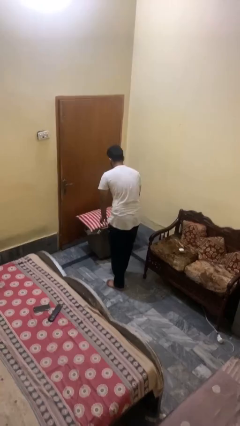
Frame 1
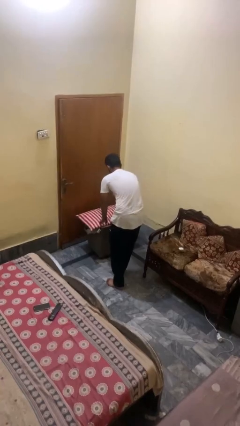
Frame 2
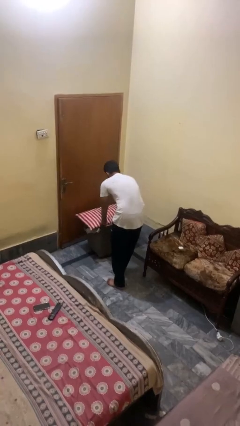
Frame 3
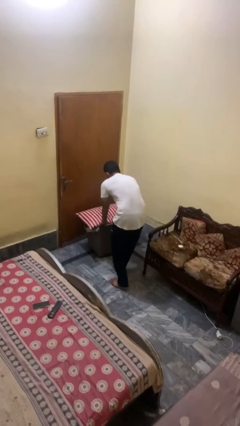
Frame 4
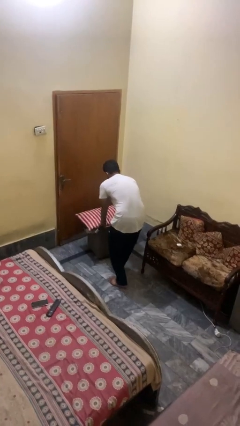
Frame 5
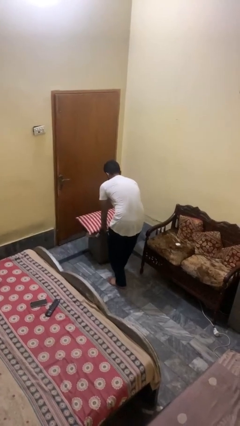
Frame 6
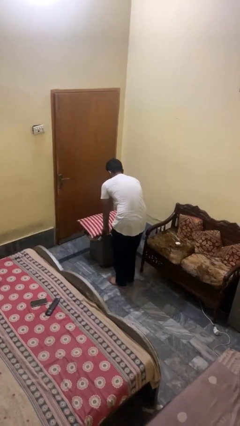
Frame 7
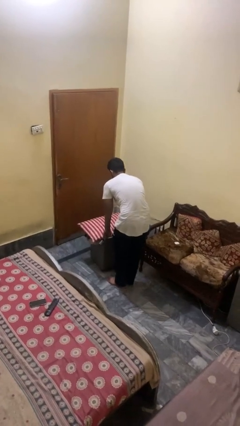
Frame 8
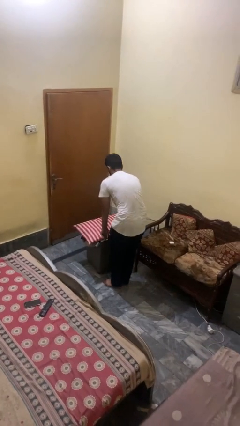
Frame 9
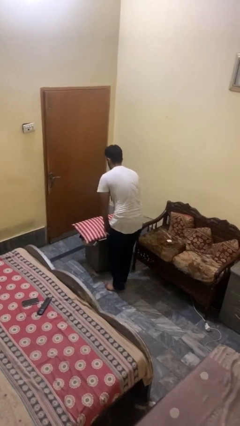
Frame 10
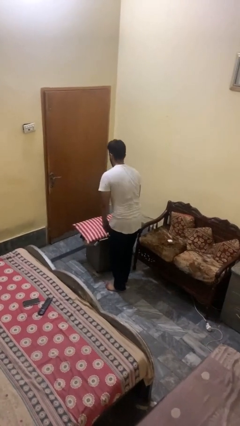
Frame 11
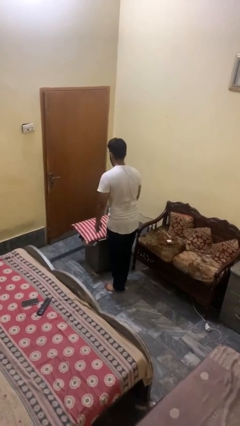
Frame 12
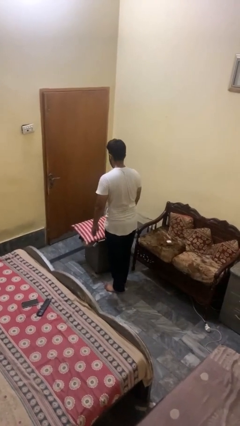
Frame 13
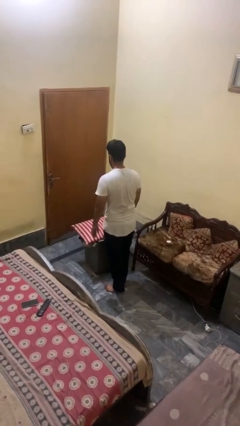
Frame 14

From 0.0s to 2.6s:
person pulls wheeled cart

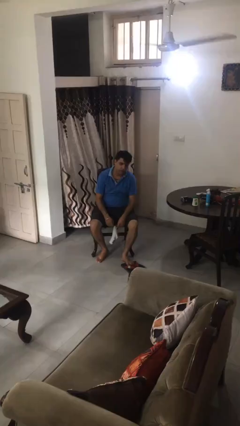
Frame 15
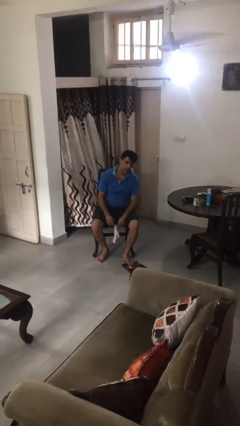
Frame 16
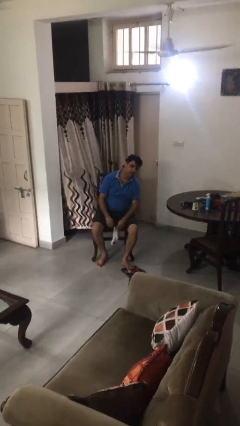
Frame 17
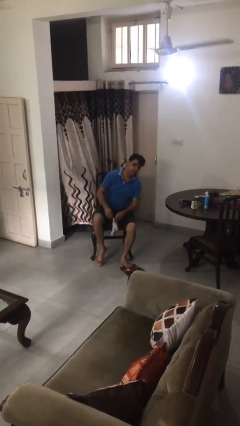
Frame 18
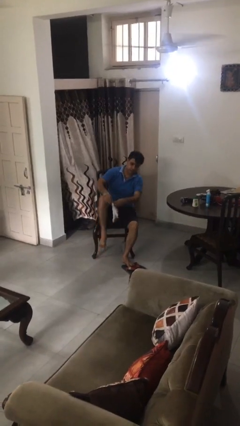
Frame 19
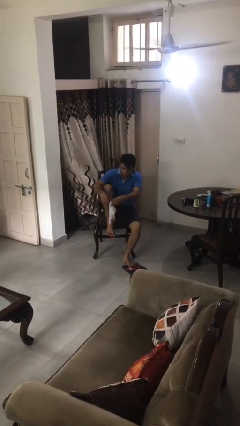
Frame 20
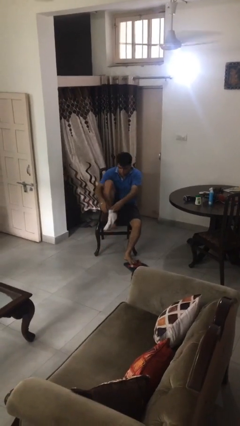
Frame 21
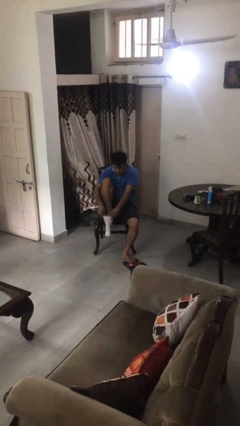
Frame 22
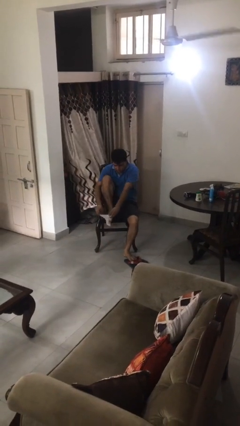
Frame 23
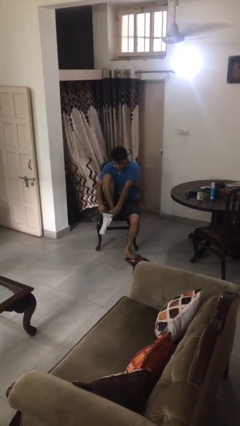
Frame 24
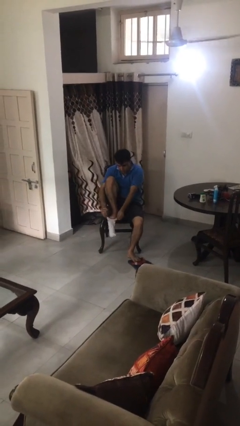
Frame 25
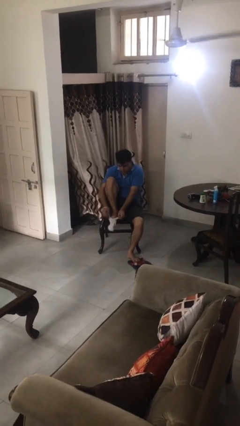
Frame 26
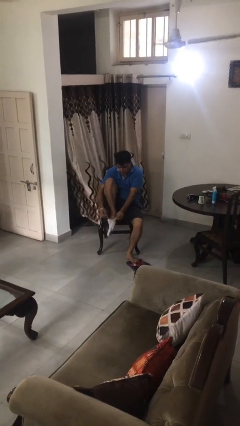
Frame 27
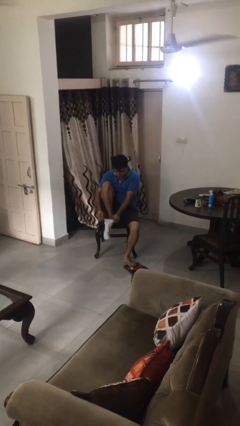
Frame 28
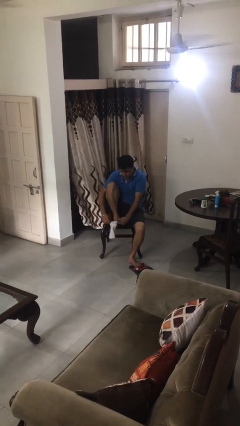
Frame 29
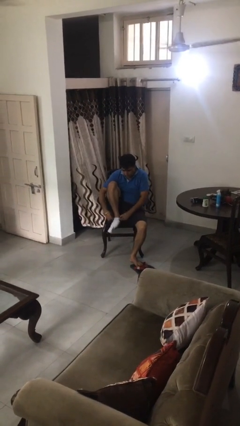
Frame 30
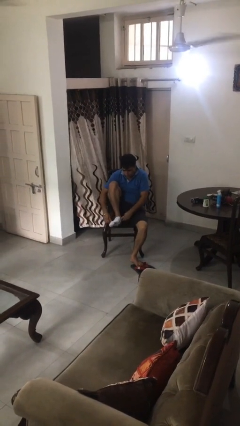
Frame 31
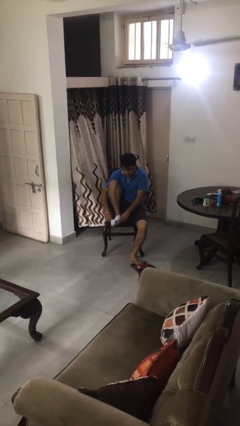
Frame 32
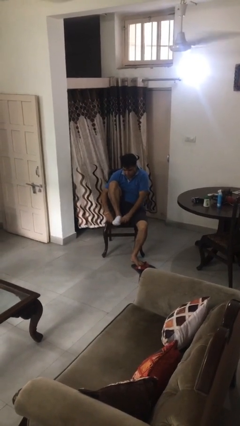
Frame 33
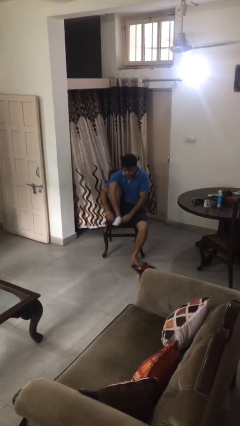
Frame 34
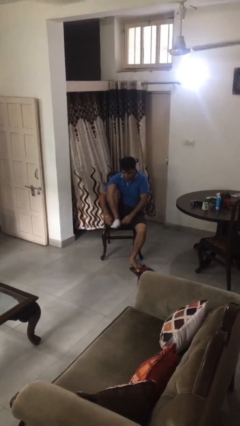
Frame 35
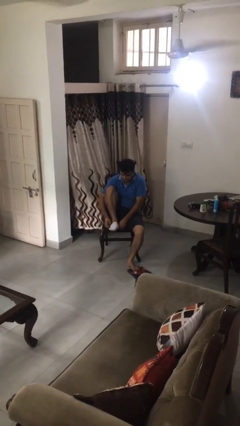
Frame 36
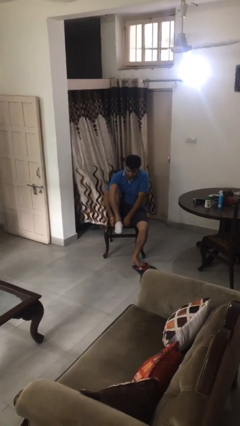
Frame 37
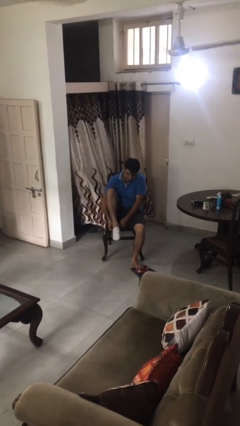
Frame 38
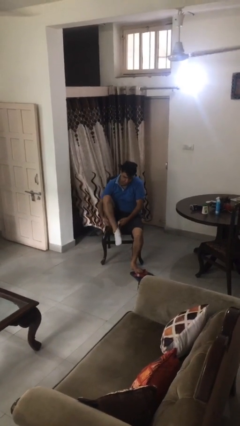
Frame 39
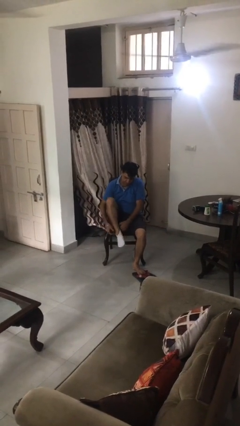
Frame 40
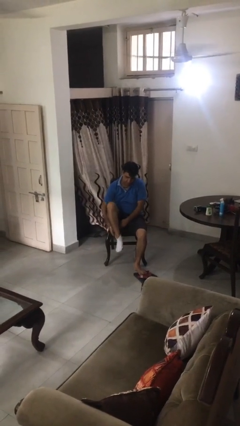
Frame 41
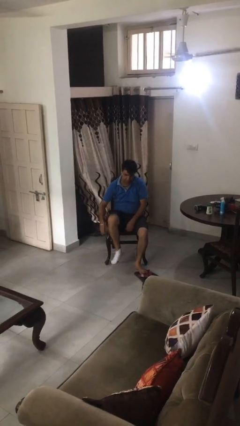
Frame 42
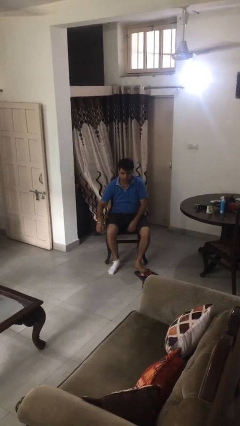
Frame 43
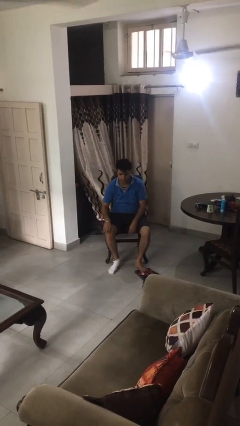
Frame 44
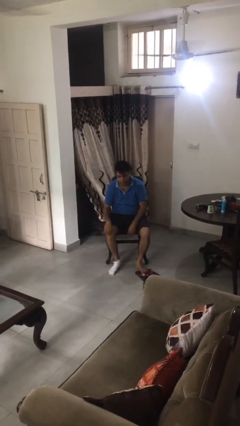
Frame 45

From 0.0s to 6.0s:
person puts on socks

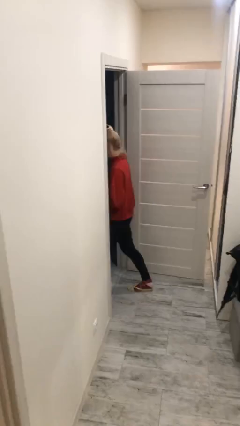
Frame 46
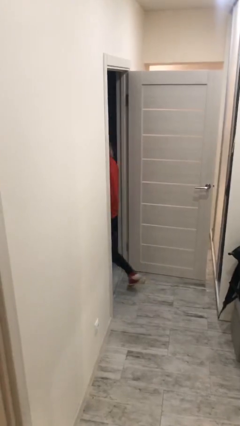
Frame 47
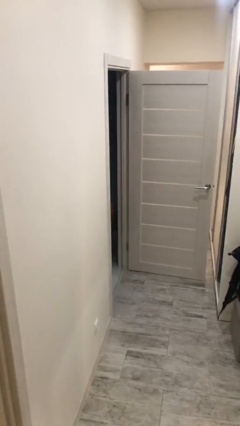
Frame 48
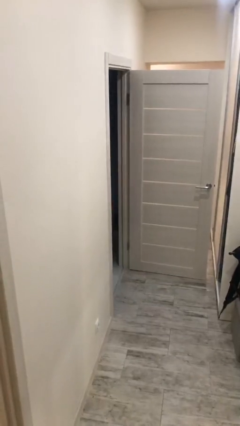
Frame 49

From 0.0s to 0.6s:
person exits scene through structure

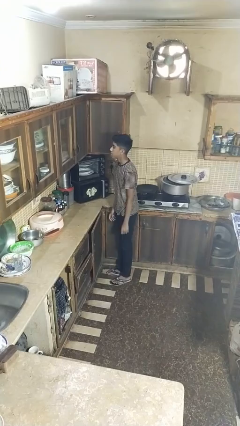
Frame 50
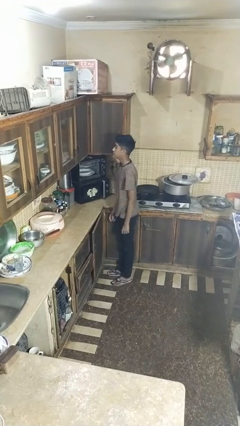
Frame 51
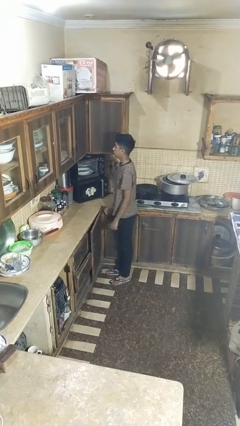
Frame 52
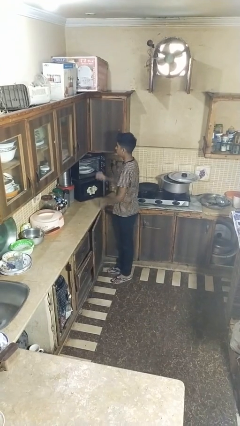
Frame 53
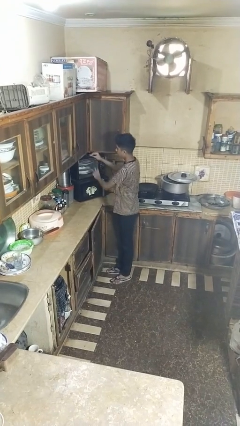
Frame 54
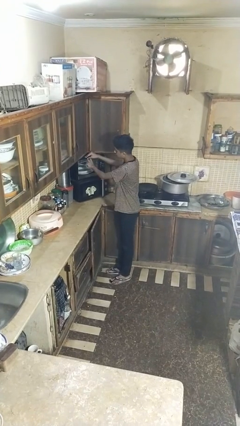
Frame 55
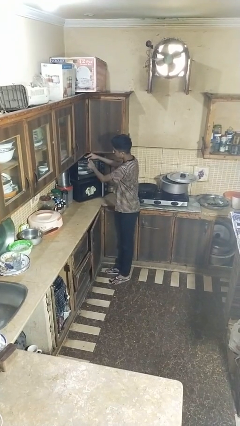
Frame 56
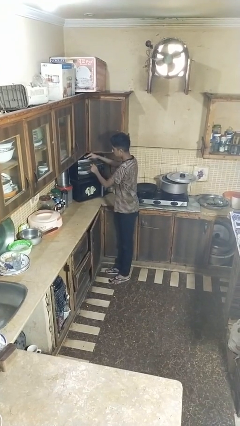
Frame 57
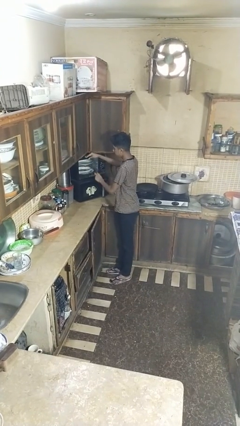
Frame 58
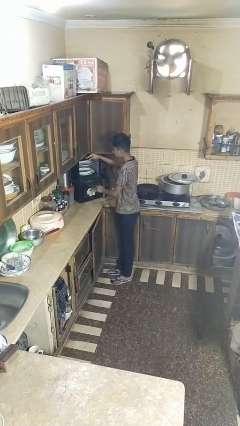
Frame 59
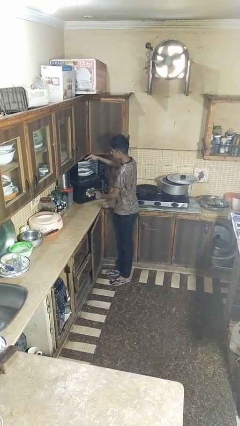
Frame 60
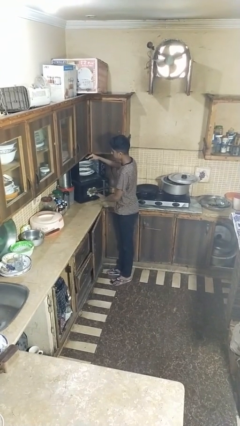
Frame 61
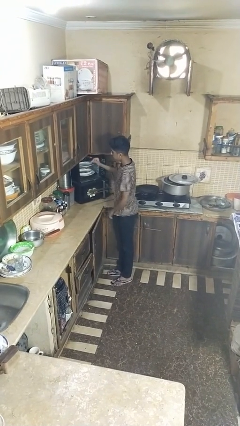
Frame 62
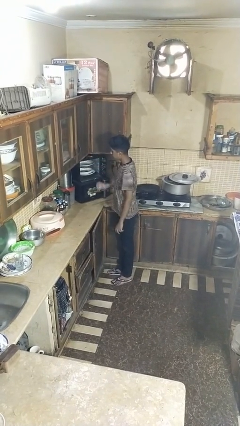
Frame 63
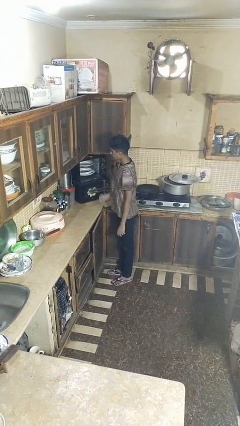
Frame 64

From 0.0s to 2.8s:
person opens dishwasher

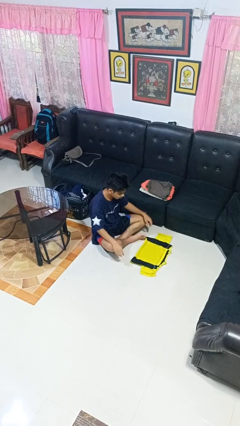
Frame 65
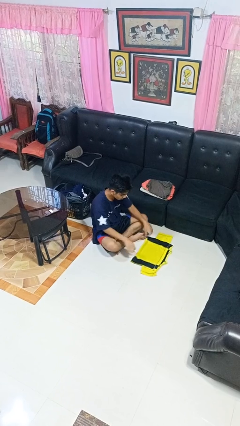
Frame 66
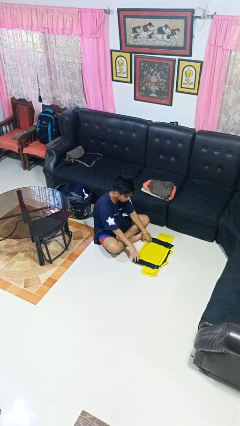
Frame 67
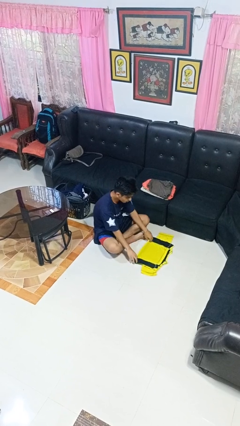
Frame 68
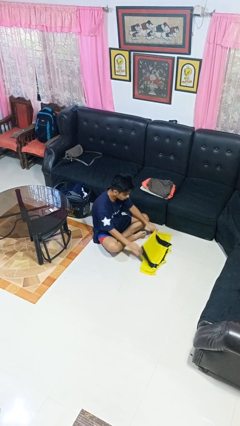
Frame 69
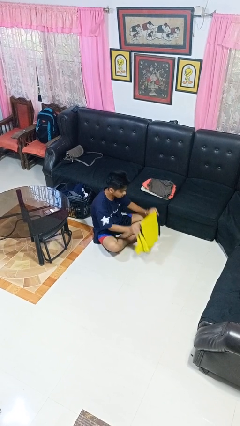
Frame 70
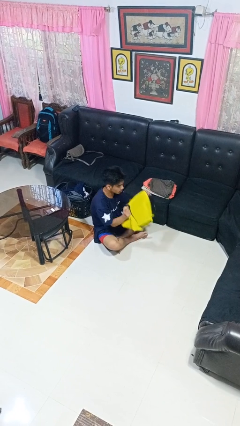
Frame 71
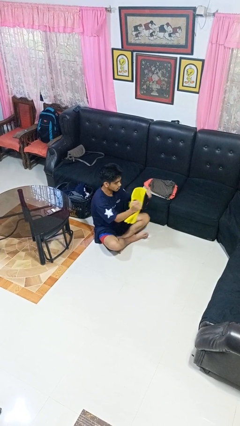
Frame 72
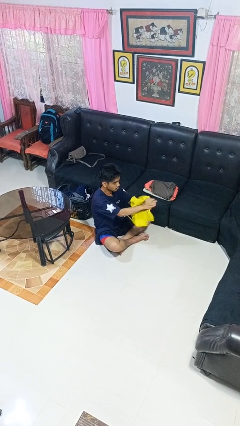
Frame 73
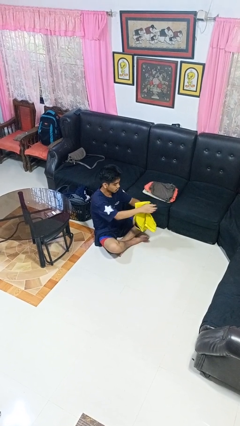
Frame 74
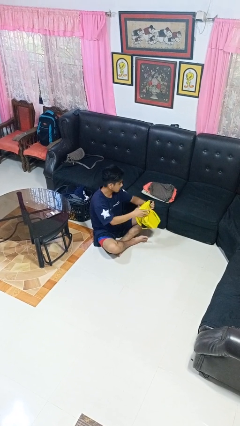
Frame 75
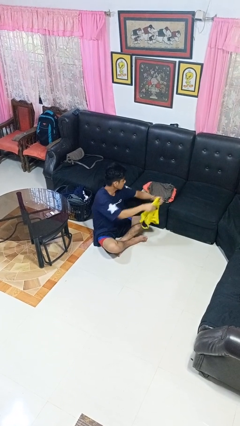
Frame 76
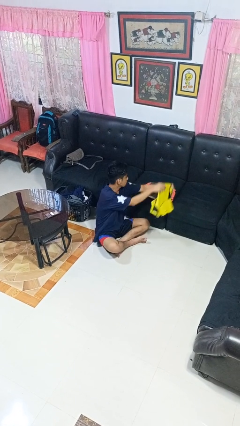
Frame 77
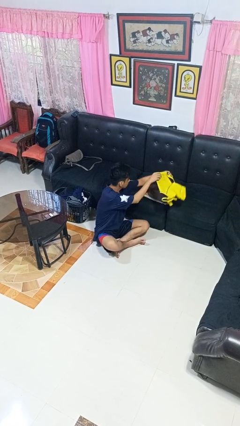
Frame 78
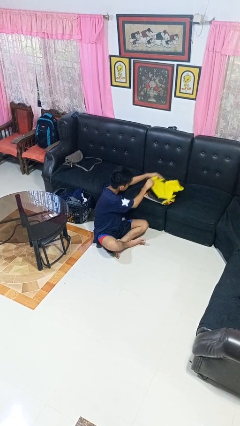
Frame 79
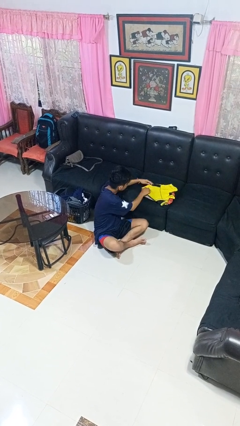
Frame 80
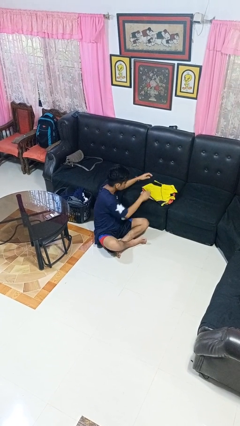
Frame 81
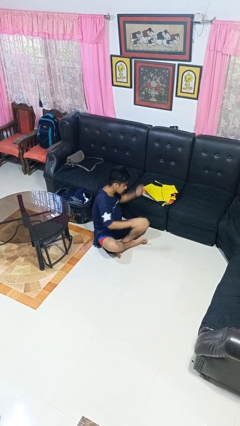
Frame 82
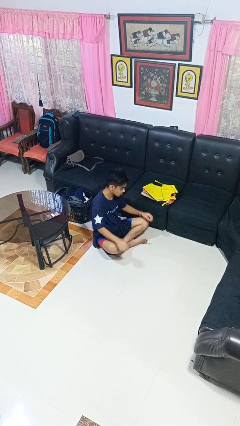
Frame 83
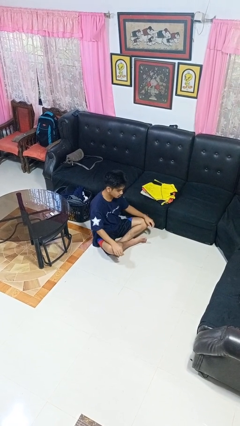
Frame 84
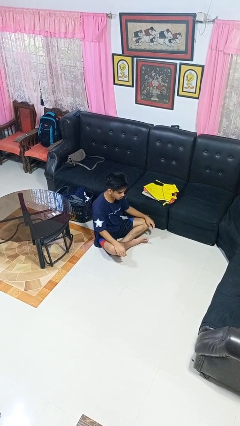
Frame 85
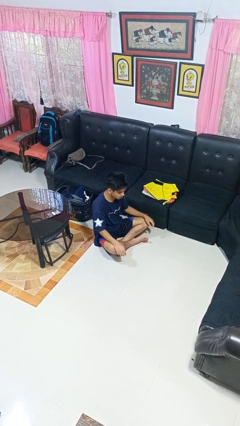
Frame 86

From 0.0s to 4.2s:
person folds shirt

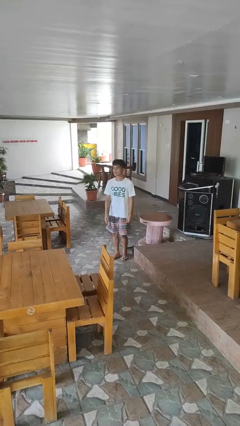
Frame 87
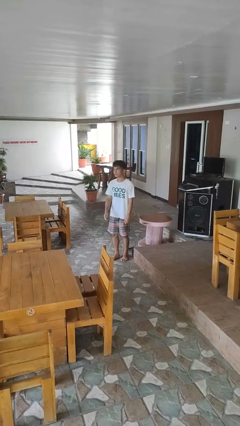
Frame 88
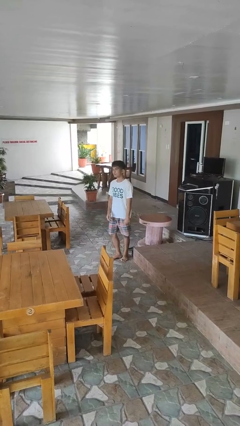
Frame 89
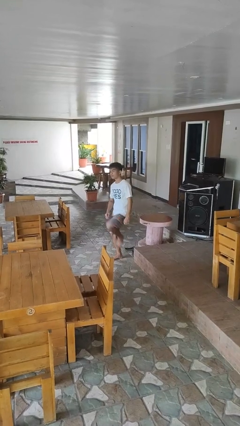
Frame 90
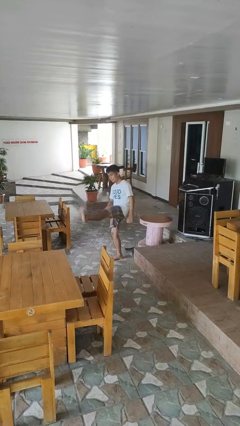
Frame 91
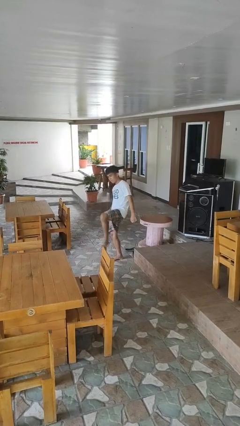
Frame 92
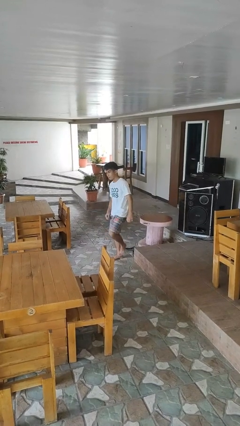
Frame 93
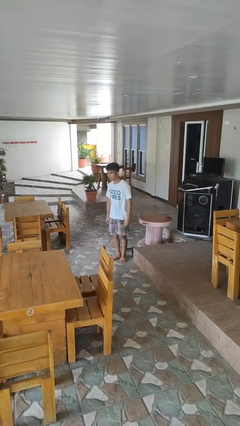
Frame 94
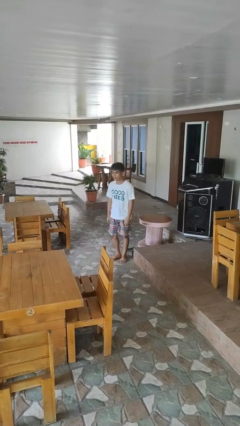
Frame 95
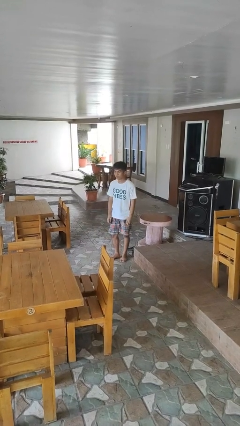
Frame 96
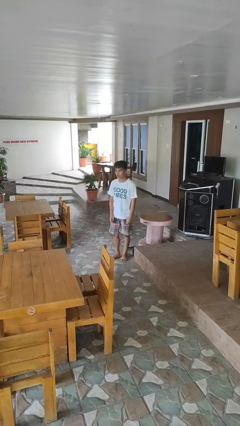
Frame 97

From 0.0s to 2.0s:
person karate kicks
